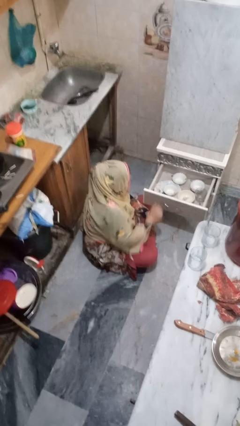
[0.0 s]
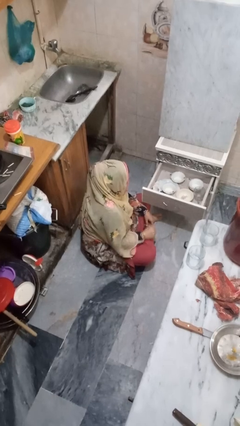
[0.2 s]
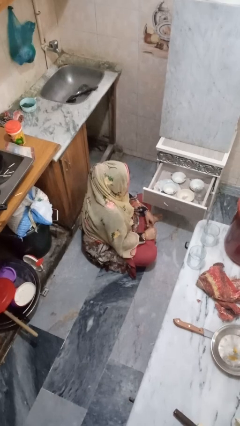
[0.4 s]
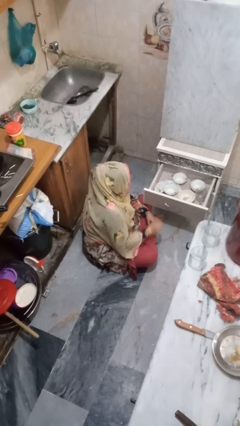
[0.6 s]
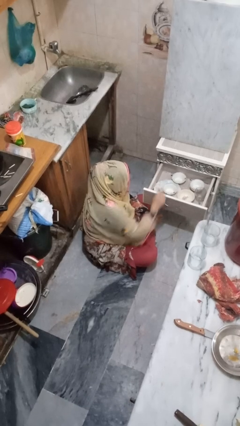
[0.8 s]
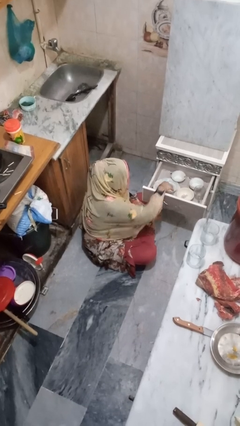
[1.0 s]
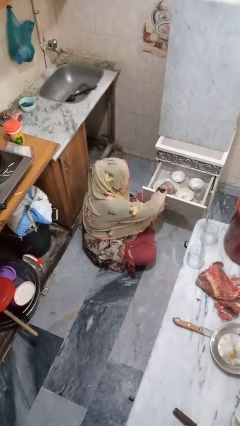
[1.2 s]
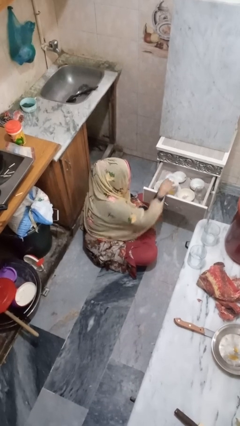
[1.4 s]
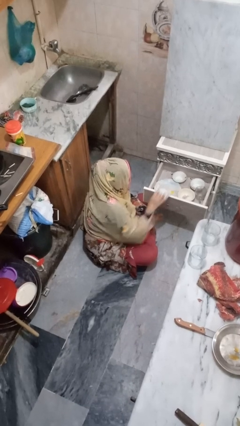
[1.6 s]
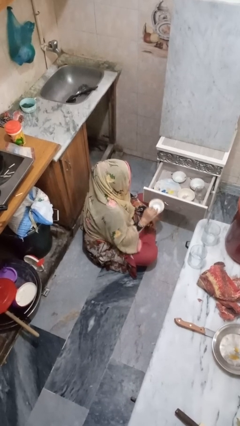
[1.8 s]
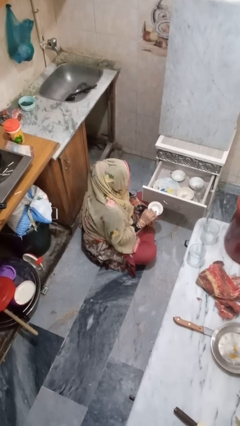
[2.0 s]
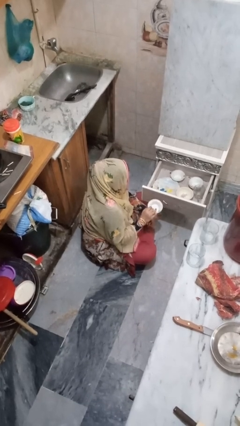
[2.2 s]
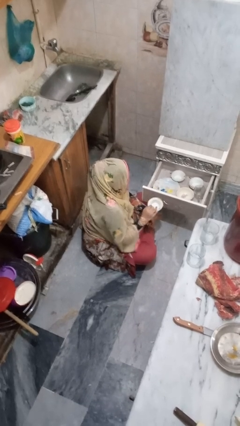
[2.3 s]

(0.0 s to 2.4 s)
person takes object from kitchen drawer

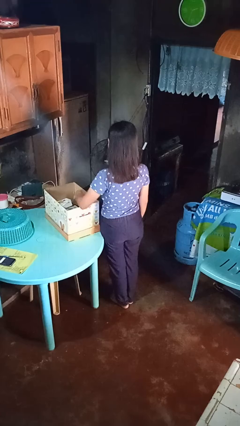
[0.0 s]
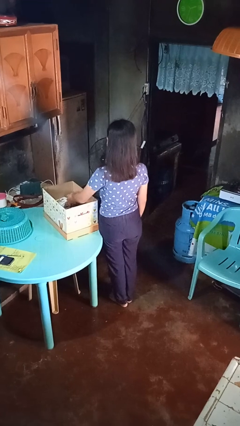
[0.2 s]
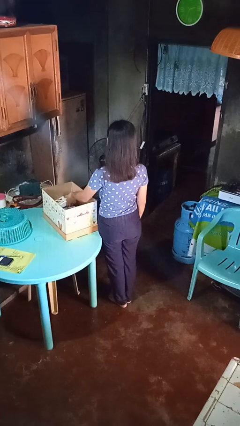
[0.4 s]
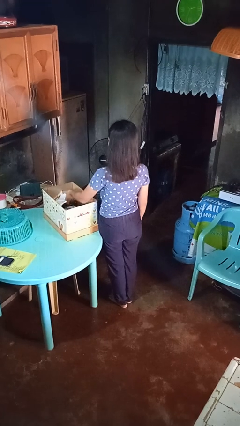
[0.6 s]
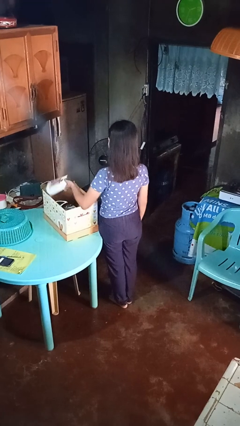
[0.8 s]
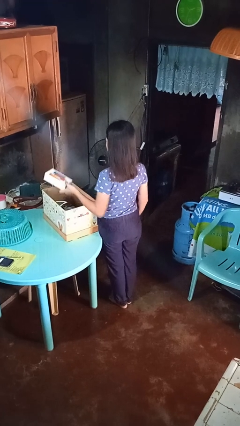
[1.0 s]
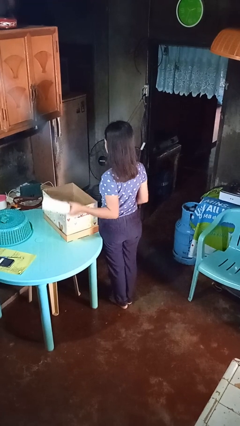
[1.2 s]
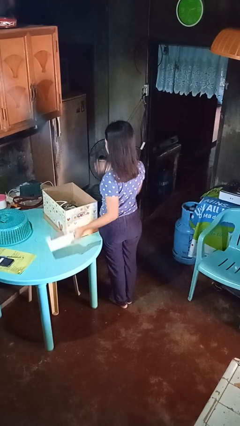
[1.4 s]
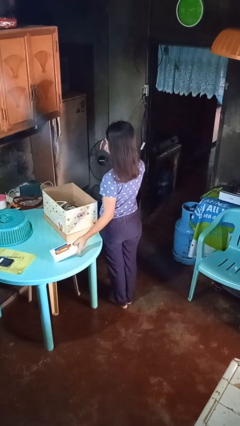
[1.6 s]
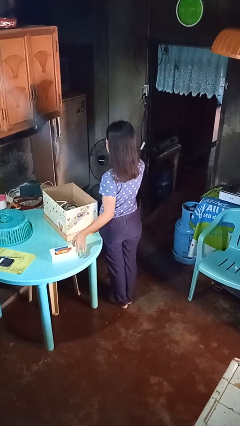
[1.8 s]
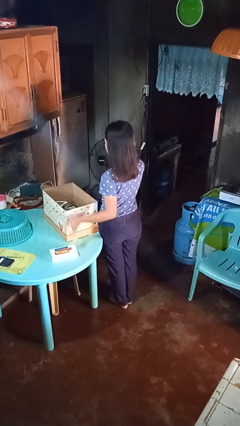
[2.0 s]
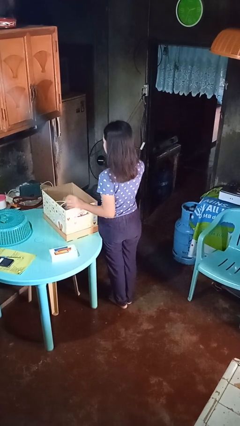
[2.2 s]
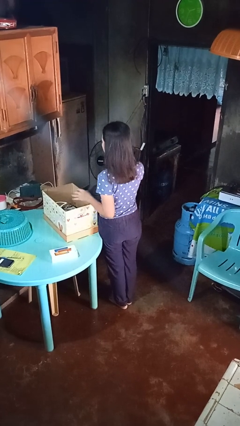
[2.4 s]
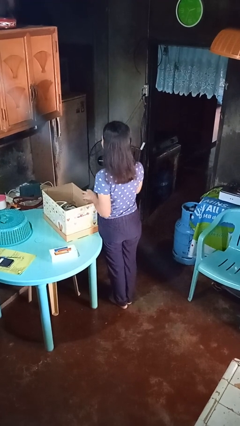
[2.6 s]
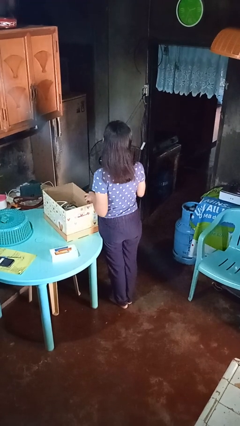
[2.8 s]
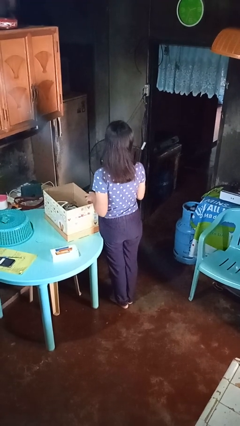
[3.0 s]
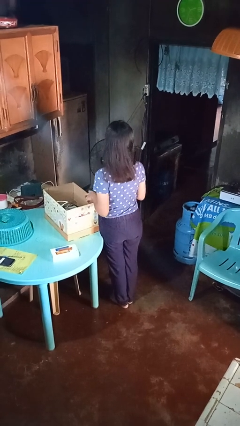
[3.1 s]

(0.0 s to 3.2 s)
person takes object from box

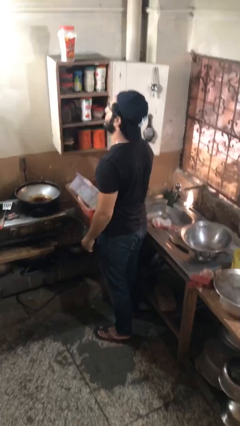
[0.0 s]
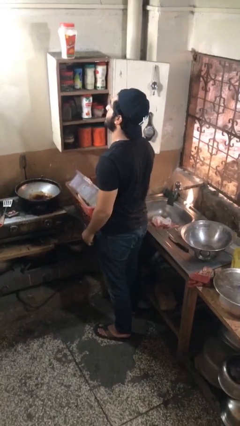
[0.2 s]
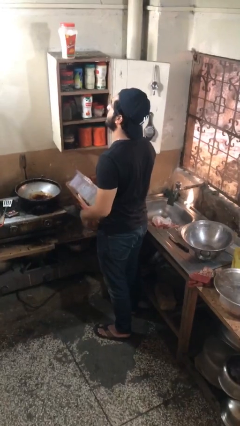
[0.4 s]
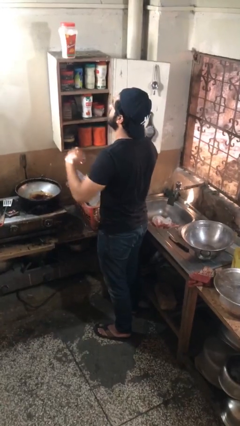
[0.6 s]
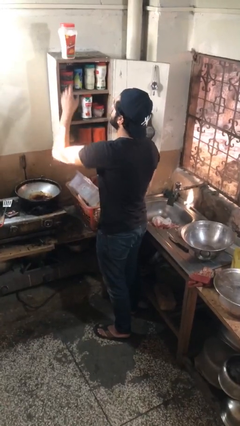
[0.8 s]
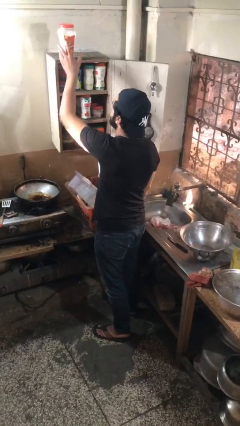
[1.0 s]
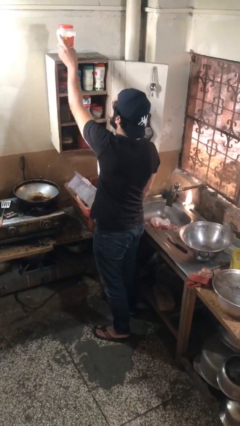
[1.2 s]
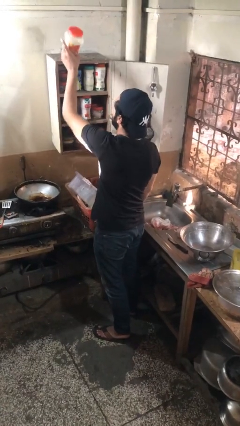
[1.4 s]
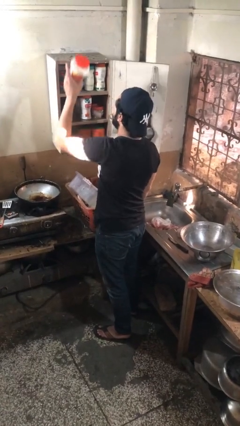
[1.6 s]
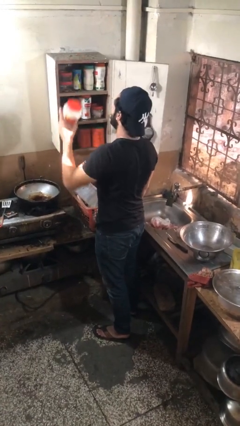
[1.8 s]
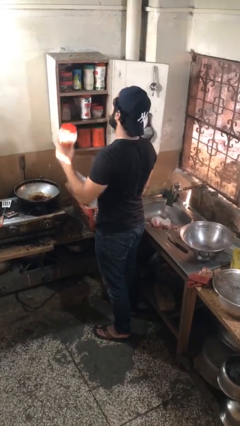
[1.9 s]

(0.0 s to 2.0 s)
person takes object from cabinet

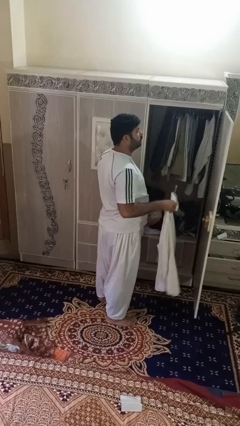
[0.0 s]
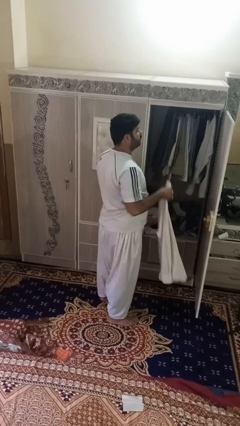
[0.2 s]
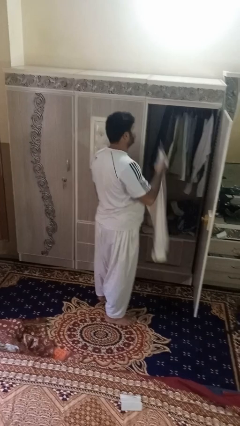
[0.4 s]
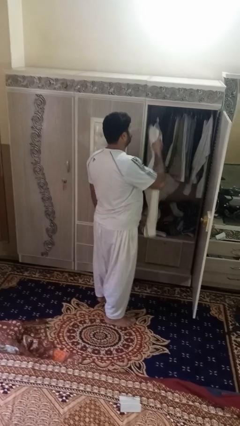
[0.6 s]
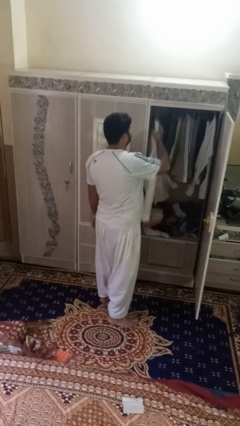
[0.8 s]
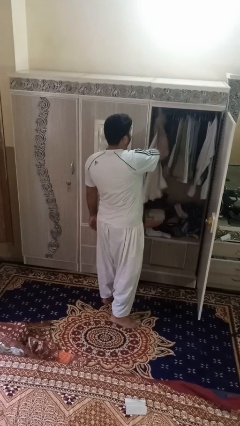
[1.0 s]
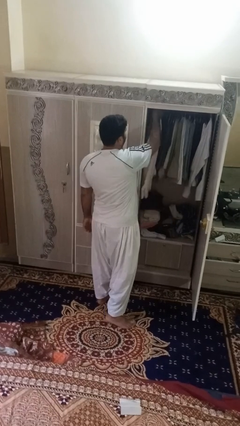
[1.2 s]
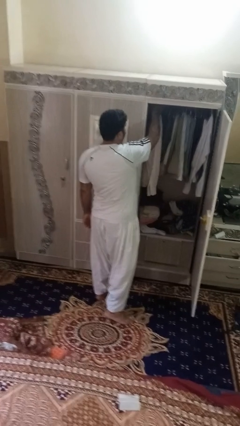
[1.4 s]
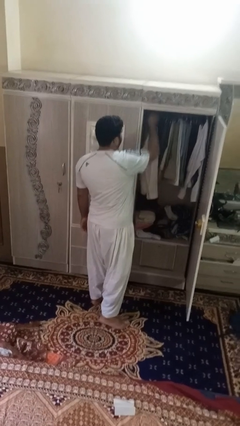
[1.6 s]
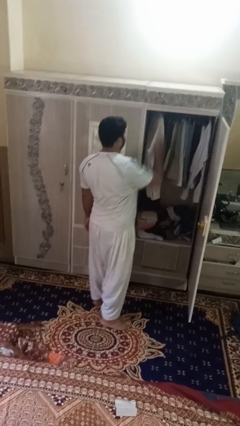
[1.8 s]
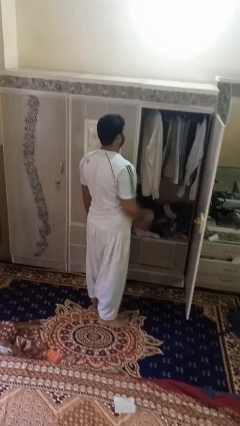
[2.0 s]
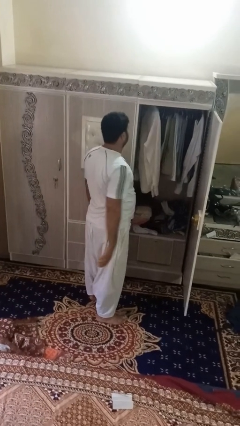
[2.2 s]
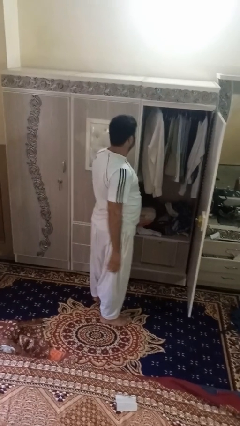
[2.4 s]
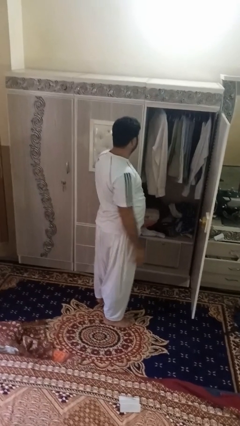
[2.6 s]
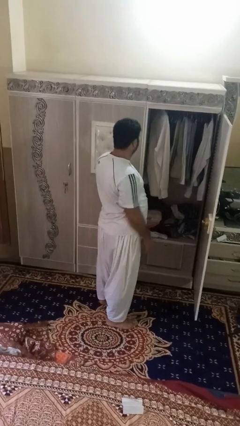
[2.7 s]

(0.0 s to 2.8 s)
person puts clothes into closet

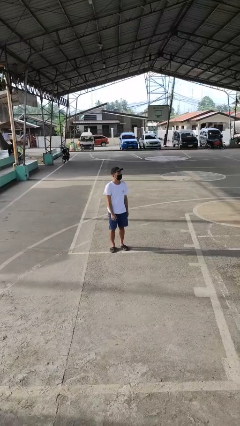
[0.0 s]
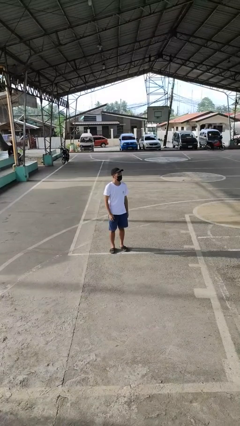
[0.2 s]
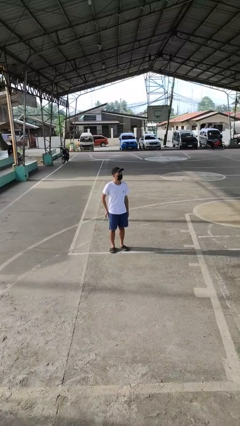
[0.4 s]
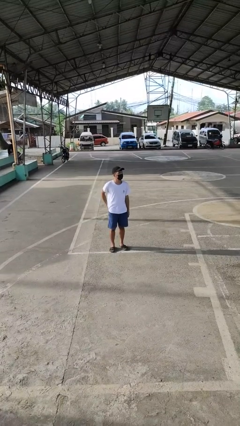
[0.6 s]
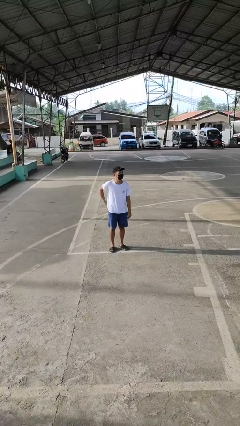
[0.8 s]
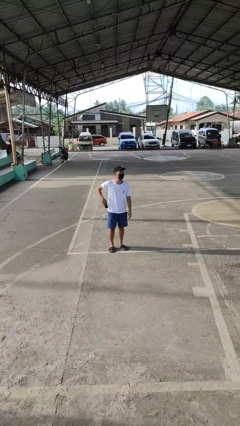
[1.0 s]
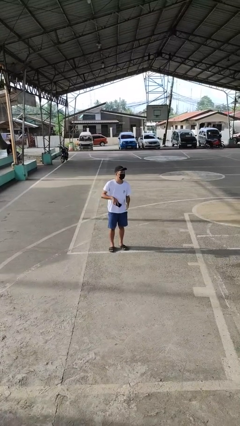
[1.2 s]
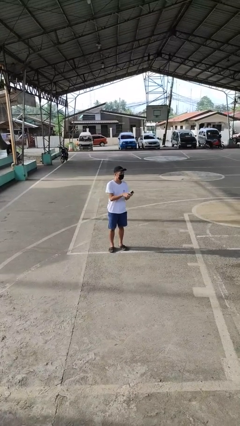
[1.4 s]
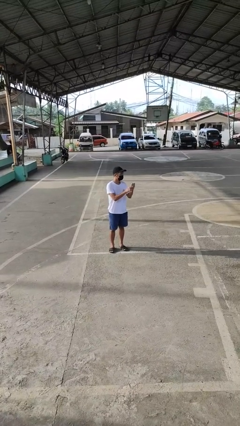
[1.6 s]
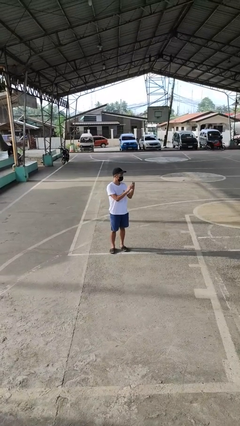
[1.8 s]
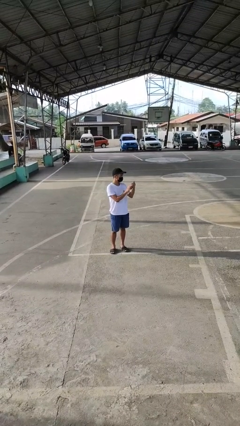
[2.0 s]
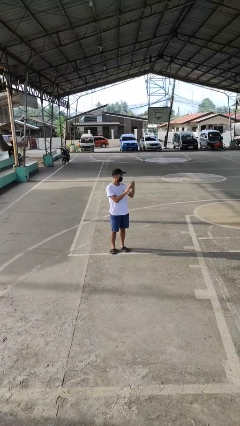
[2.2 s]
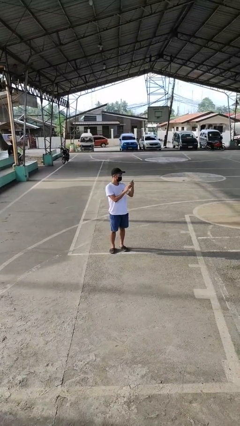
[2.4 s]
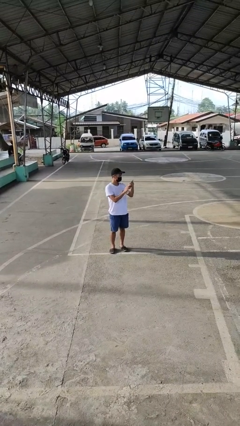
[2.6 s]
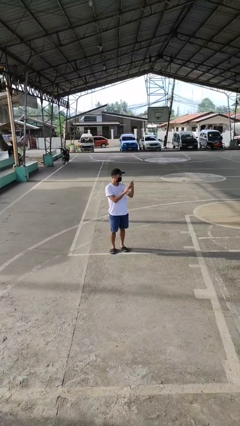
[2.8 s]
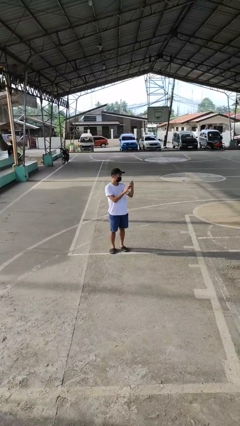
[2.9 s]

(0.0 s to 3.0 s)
person takes phone from pocket

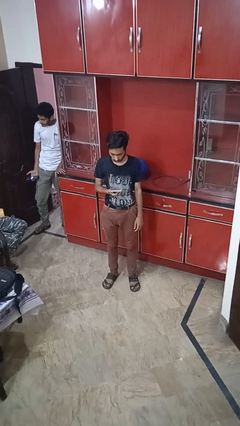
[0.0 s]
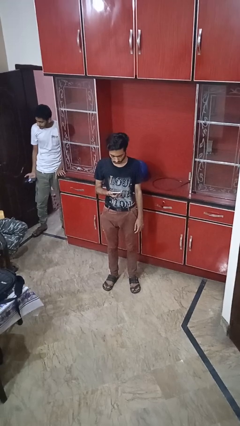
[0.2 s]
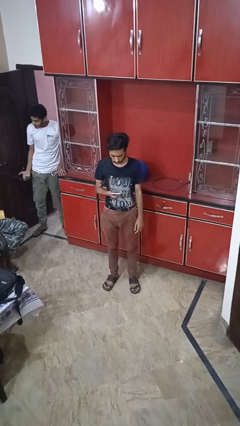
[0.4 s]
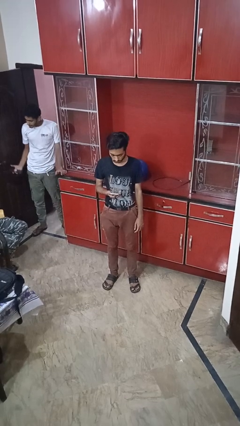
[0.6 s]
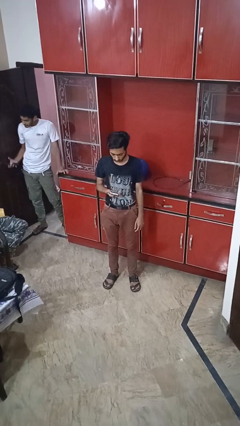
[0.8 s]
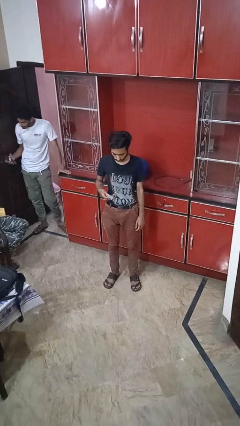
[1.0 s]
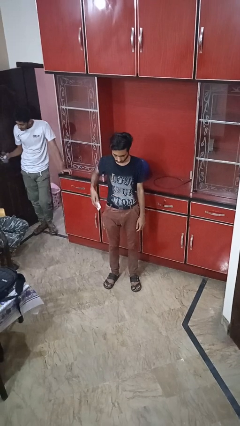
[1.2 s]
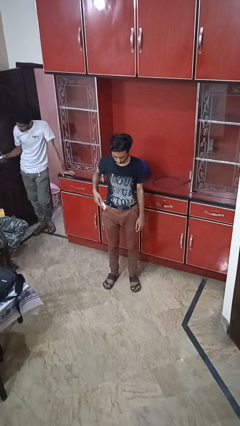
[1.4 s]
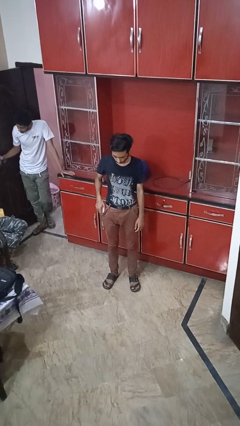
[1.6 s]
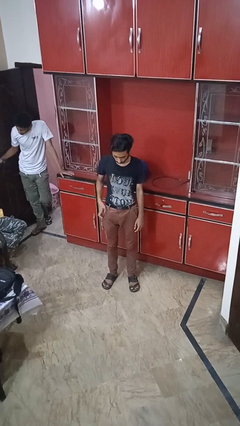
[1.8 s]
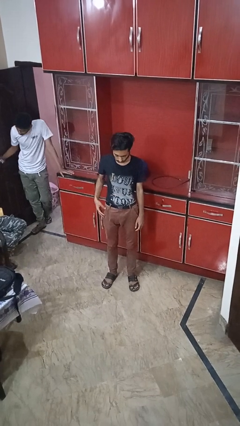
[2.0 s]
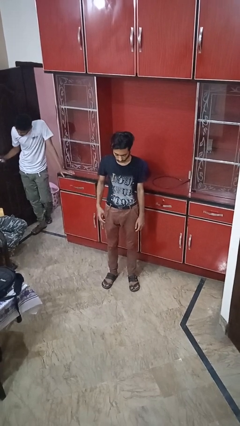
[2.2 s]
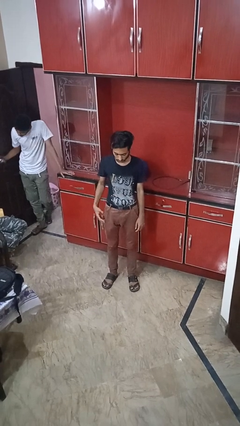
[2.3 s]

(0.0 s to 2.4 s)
person puts phone into pocket

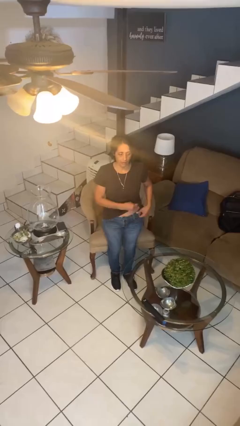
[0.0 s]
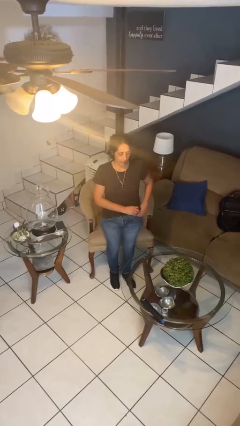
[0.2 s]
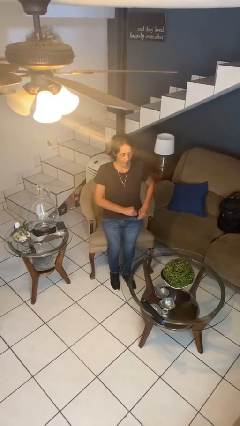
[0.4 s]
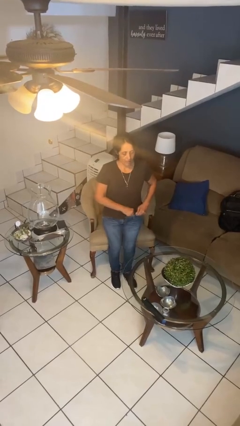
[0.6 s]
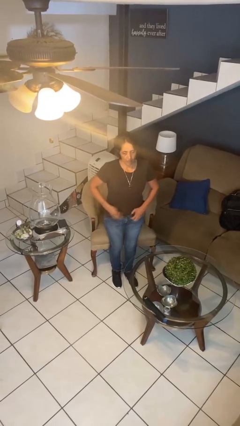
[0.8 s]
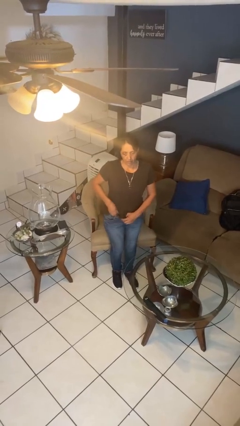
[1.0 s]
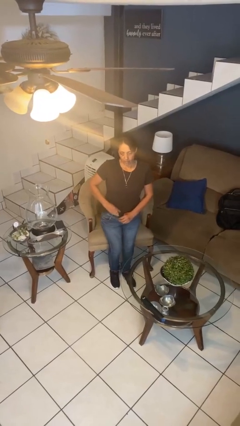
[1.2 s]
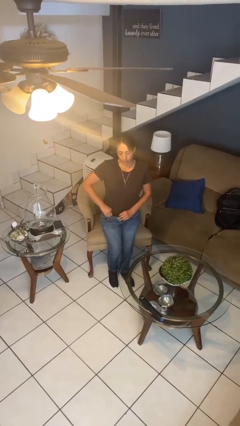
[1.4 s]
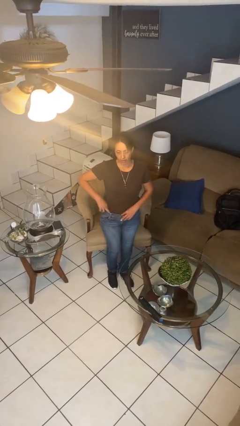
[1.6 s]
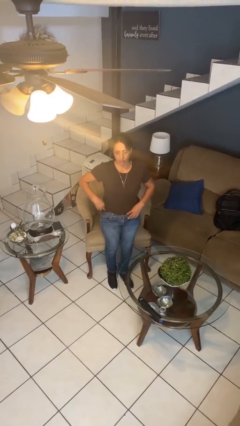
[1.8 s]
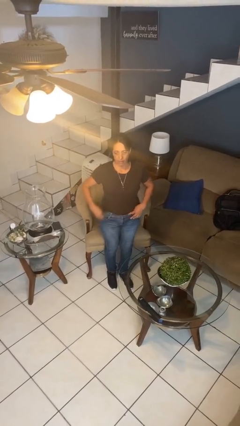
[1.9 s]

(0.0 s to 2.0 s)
person tucks in shirt
